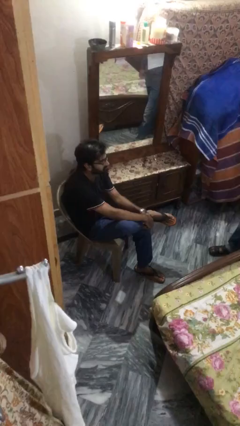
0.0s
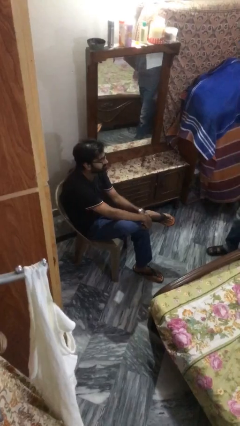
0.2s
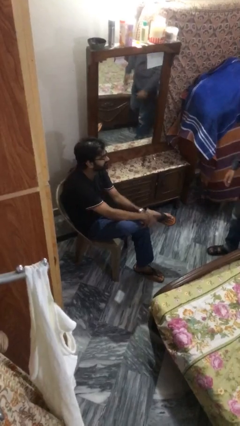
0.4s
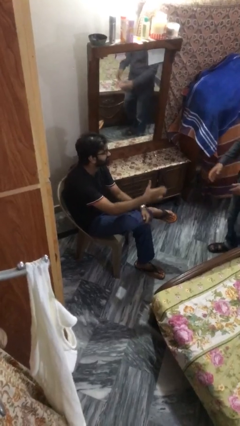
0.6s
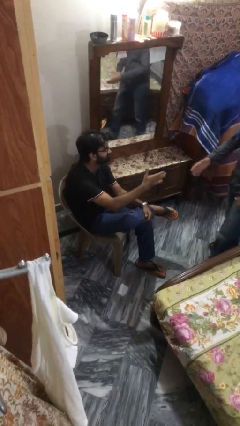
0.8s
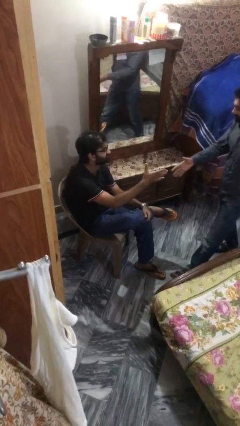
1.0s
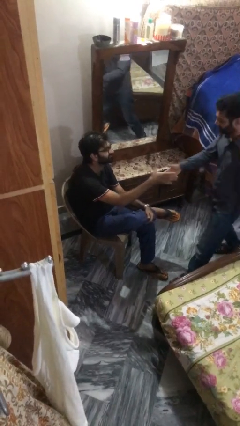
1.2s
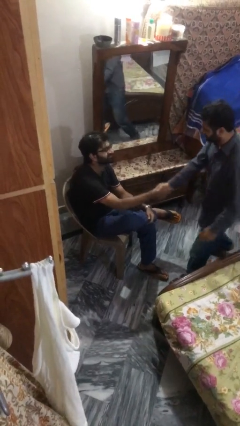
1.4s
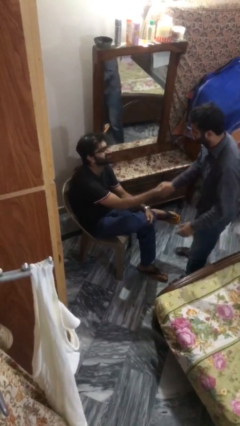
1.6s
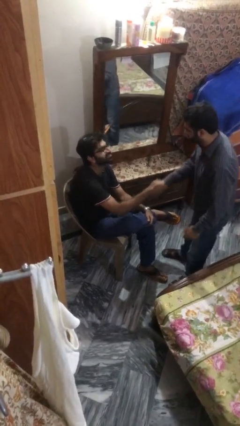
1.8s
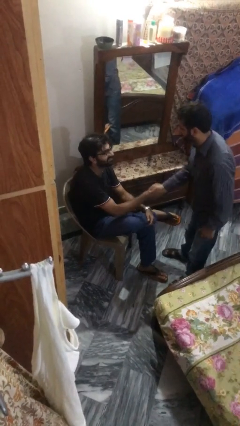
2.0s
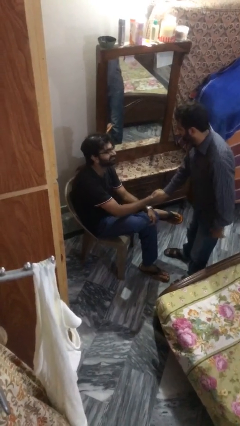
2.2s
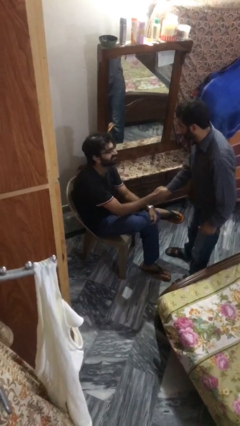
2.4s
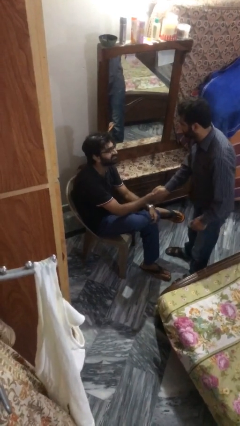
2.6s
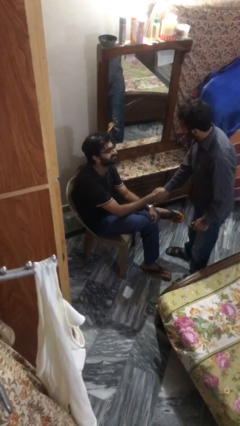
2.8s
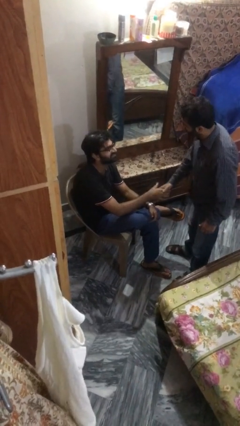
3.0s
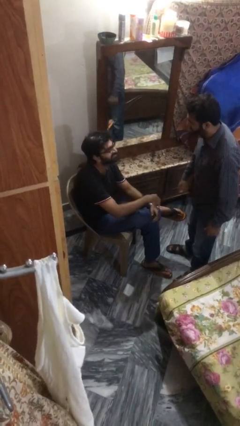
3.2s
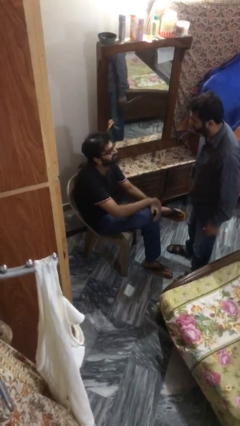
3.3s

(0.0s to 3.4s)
person shakes hand

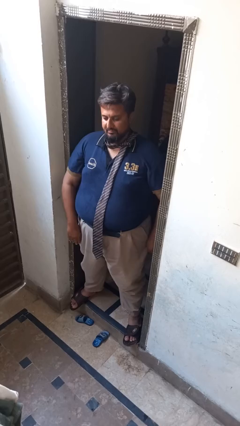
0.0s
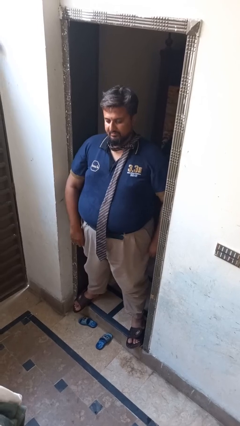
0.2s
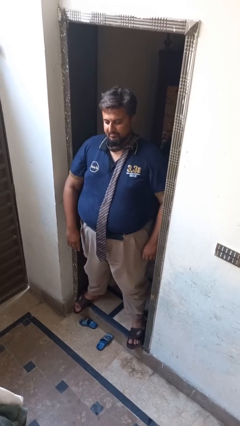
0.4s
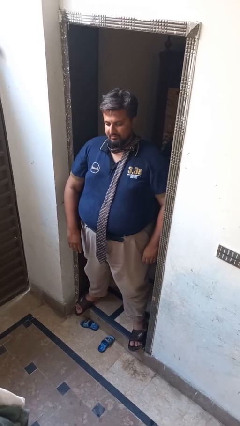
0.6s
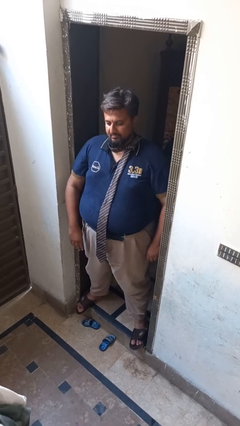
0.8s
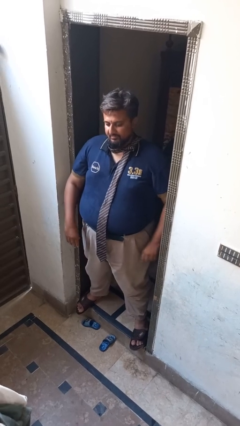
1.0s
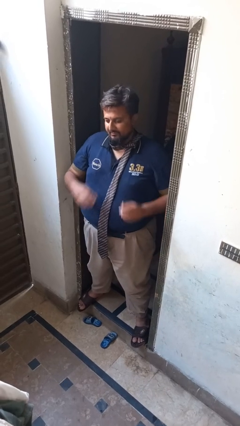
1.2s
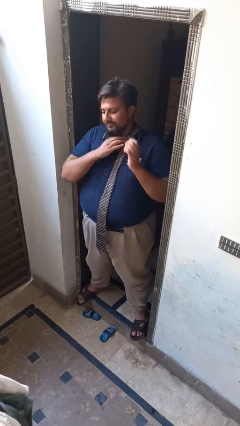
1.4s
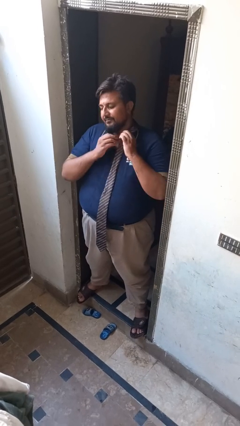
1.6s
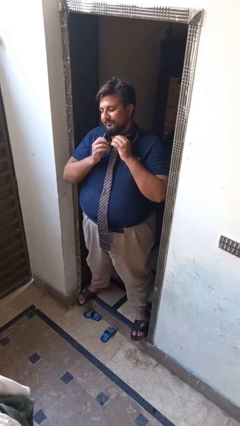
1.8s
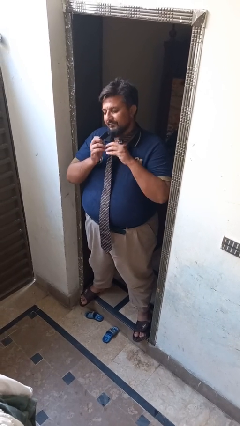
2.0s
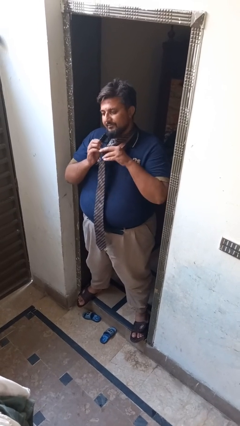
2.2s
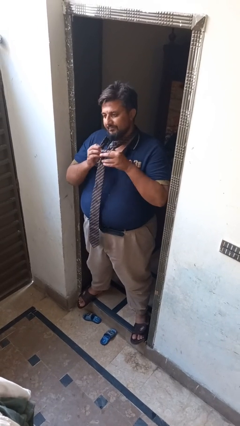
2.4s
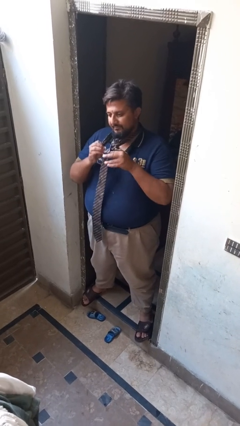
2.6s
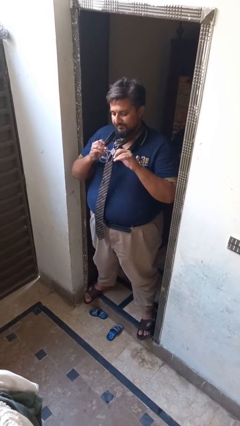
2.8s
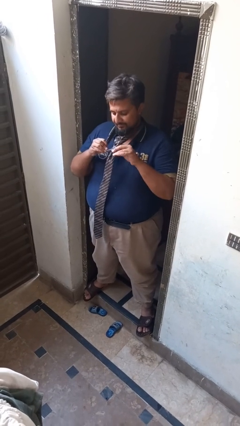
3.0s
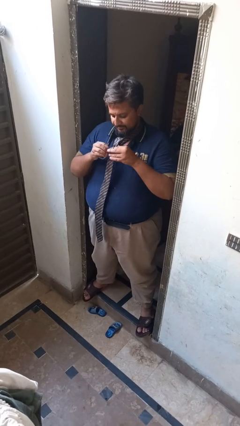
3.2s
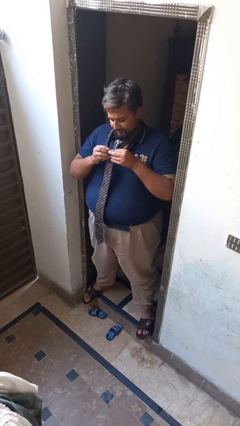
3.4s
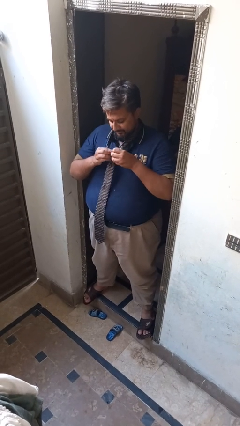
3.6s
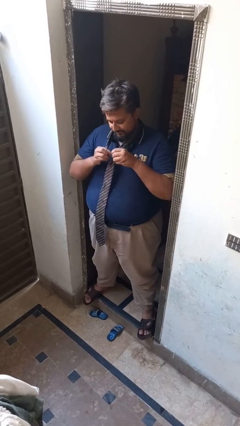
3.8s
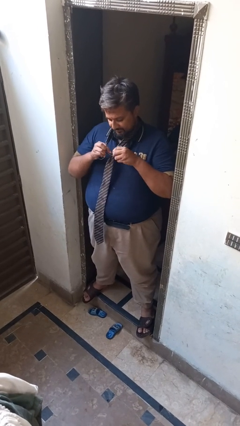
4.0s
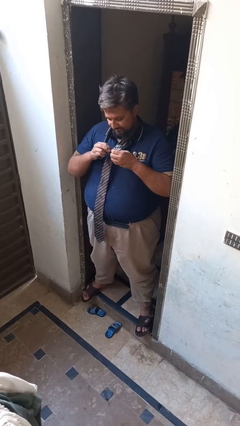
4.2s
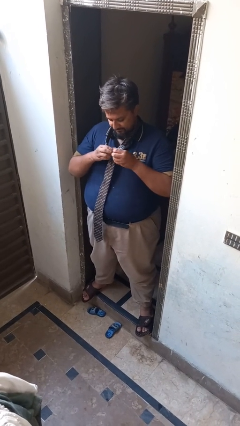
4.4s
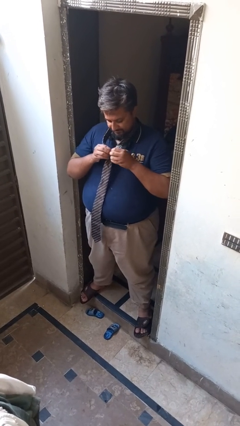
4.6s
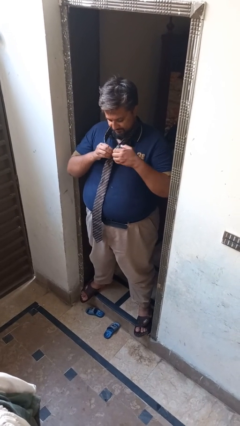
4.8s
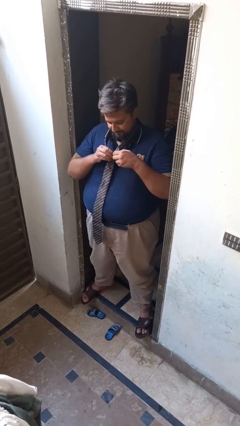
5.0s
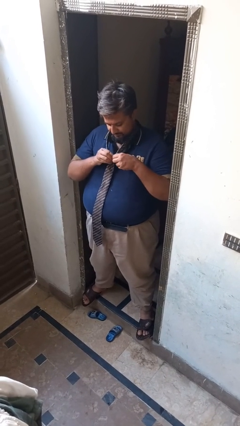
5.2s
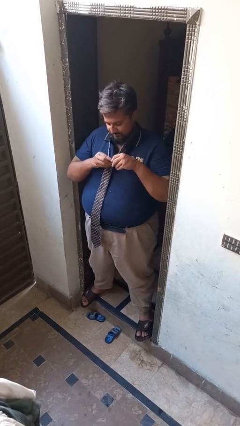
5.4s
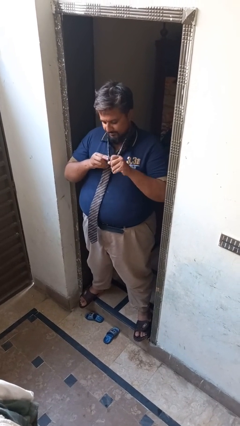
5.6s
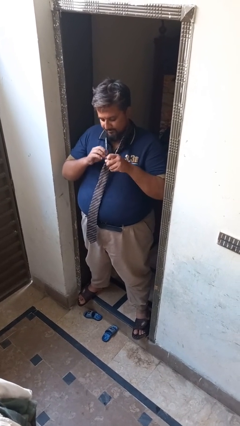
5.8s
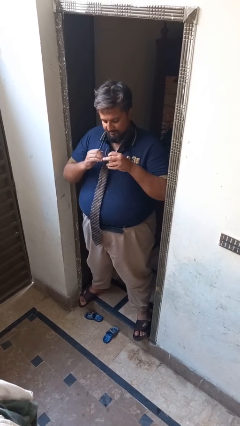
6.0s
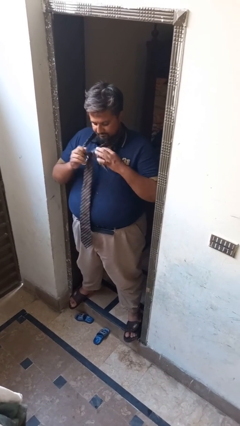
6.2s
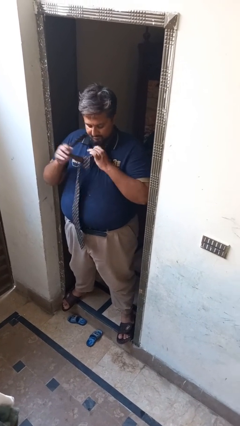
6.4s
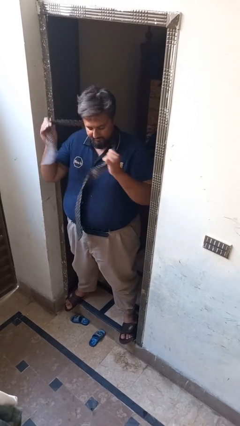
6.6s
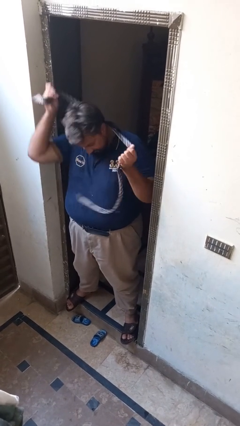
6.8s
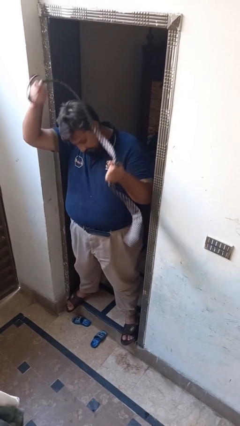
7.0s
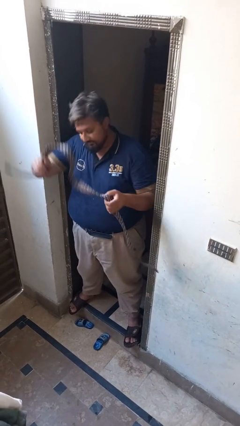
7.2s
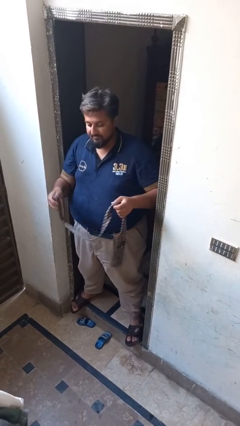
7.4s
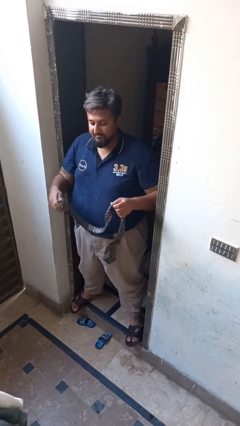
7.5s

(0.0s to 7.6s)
person takes off necktie

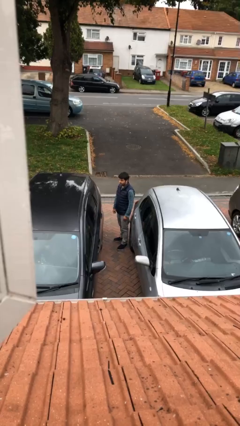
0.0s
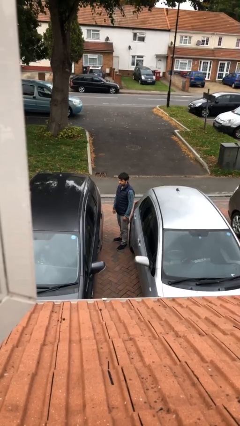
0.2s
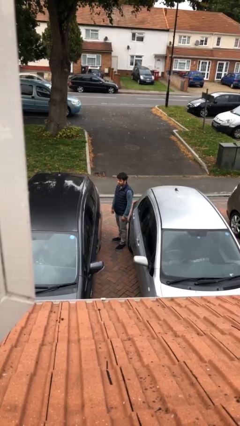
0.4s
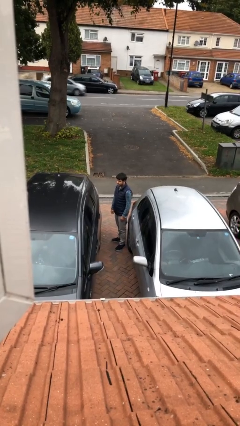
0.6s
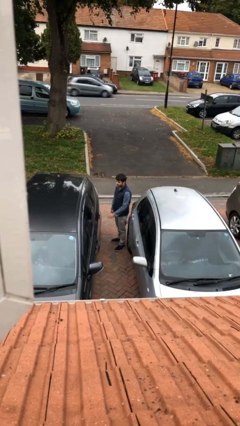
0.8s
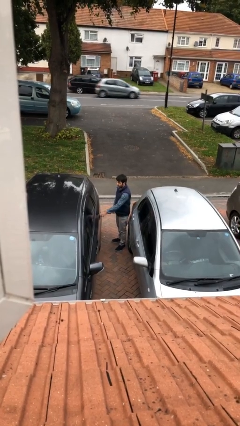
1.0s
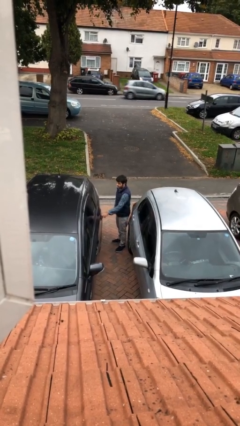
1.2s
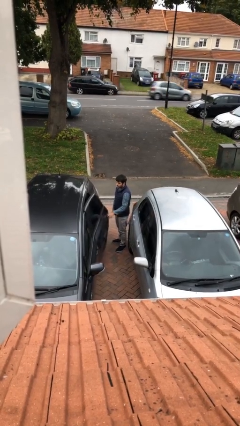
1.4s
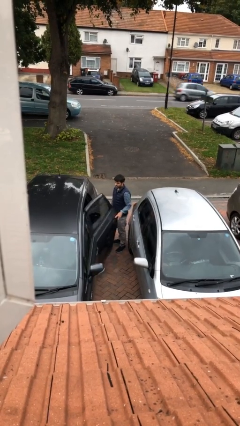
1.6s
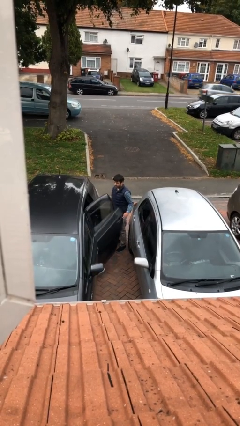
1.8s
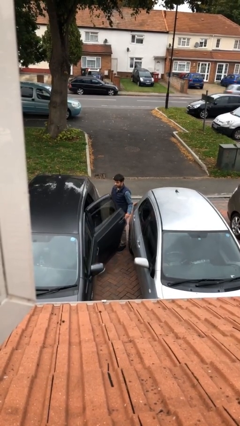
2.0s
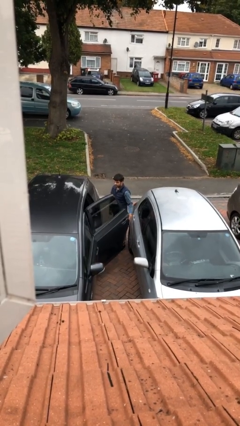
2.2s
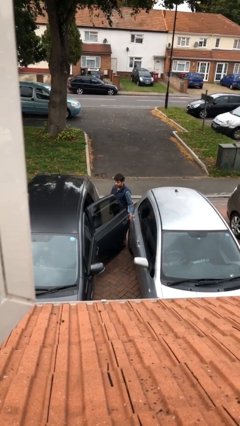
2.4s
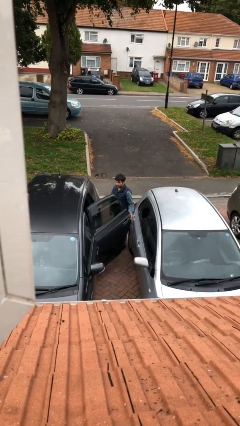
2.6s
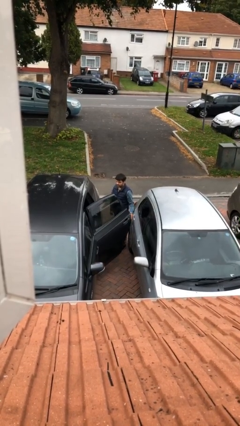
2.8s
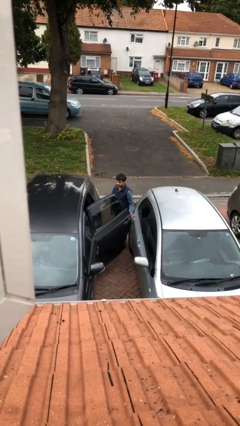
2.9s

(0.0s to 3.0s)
person opens car door

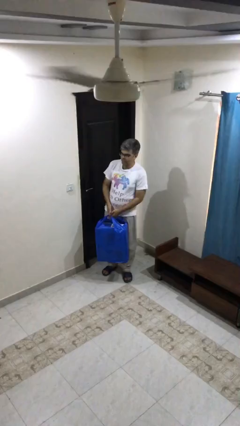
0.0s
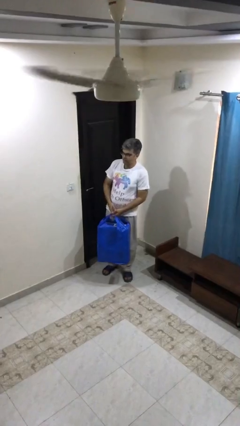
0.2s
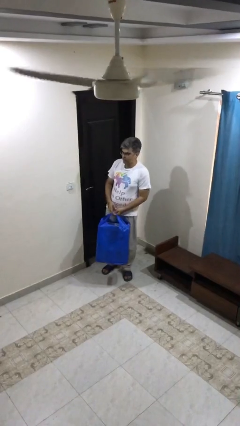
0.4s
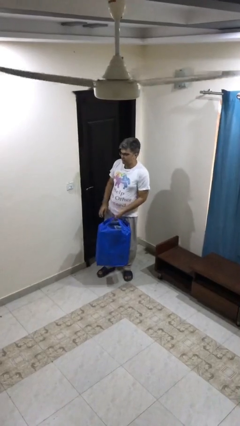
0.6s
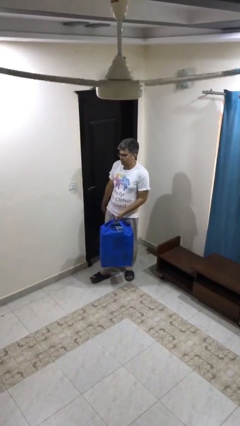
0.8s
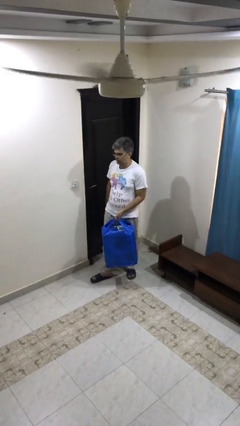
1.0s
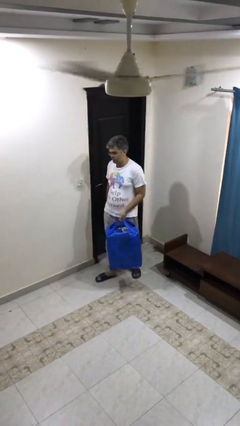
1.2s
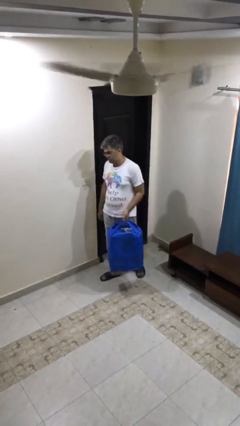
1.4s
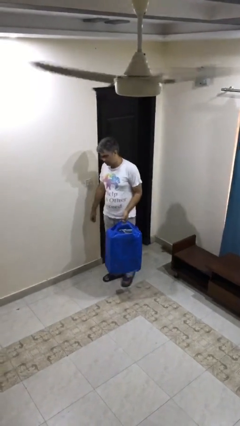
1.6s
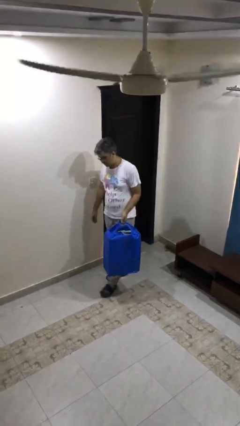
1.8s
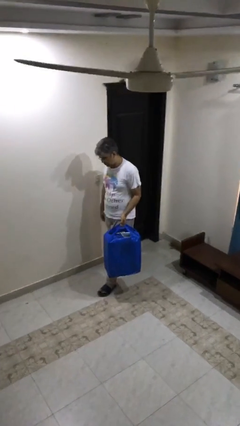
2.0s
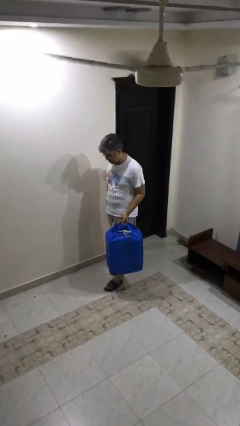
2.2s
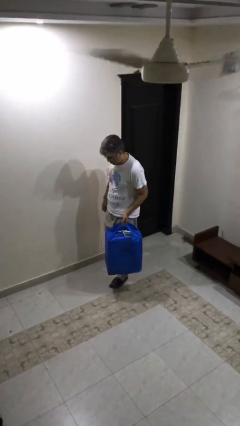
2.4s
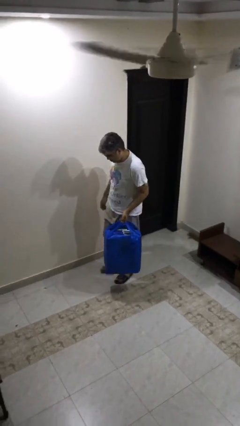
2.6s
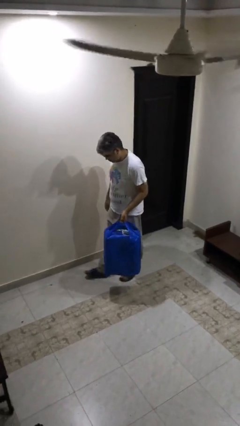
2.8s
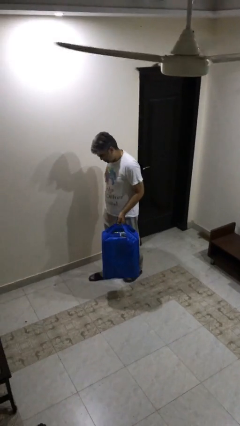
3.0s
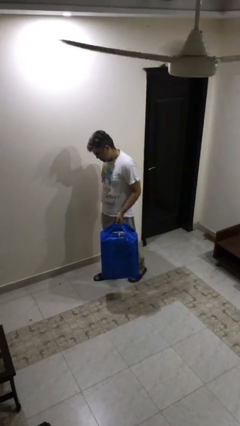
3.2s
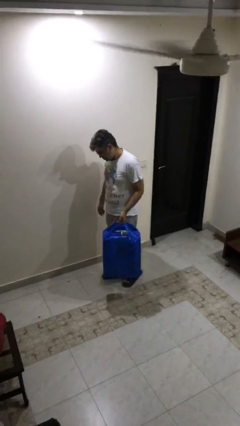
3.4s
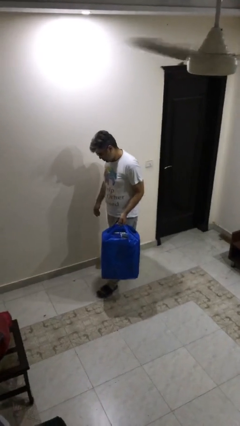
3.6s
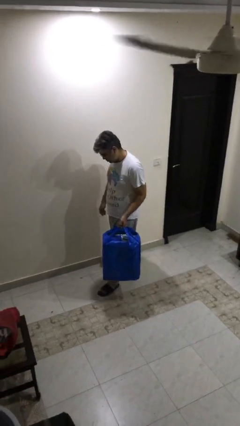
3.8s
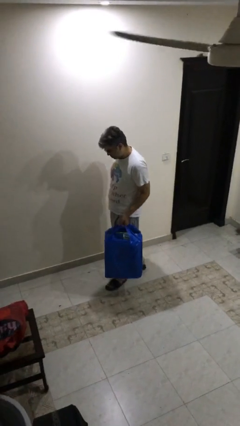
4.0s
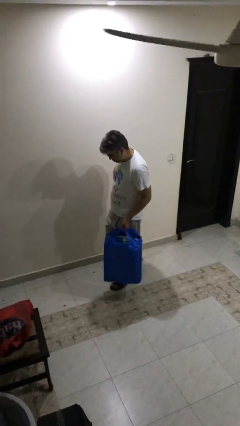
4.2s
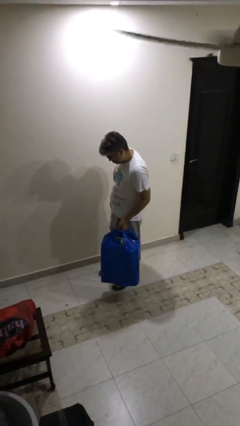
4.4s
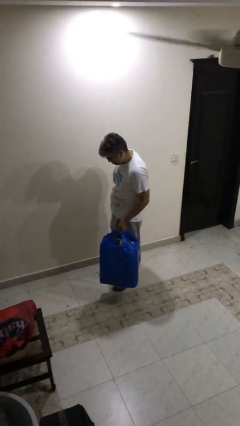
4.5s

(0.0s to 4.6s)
person carries heavy object
